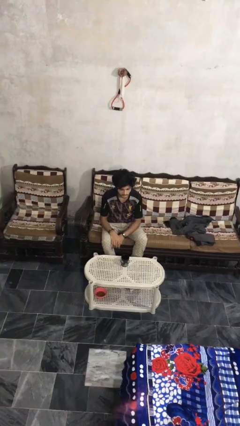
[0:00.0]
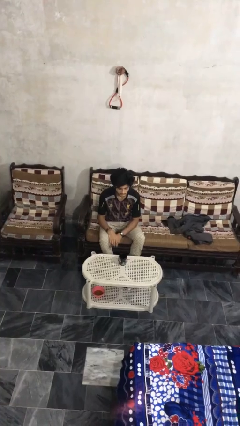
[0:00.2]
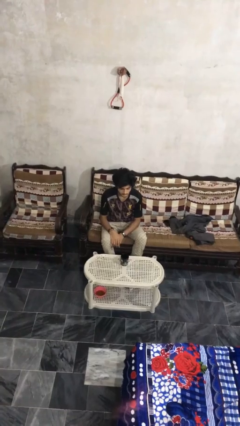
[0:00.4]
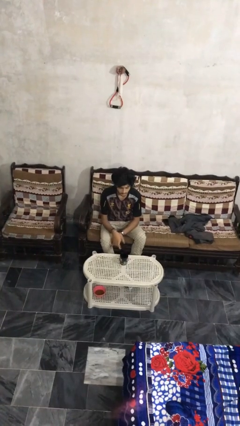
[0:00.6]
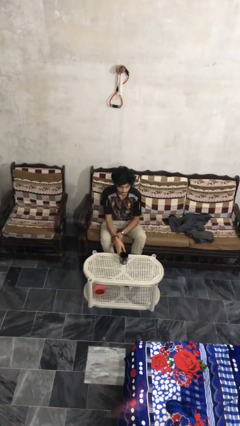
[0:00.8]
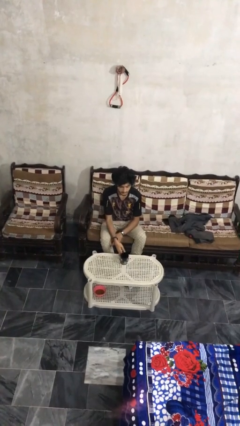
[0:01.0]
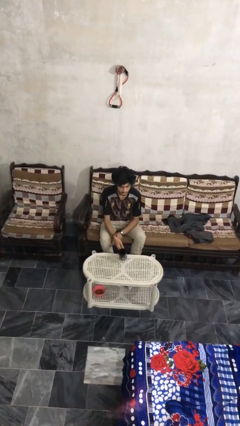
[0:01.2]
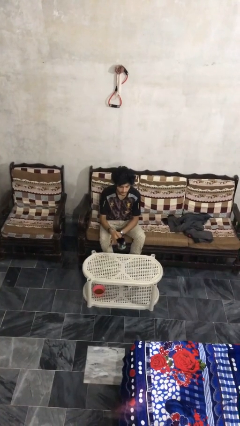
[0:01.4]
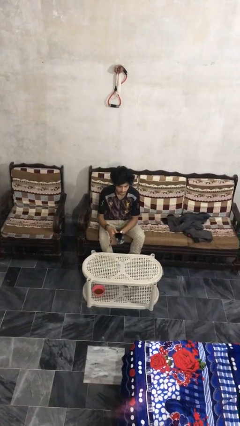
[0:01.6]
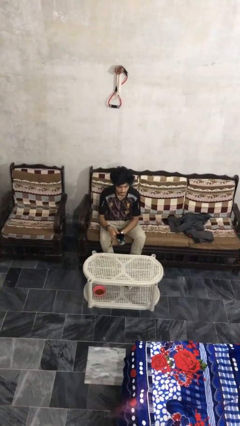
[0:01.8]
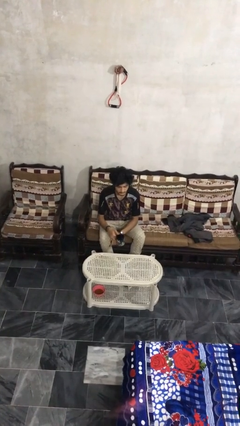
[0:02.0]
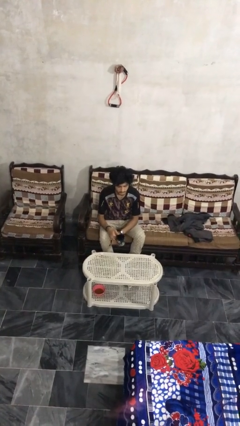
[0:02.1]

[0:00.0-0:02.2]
person picks up object from table

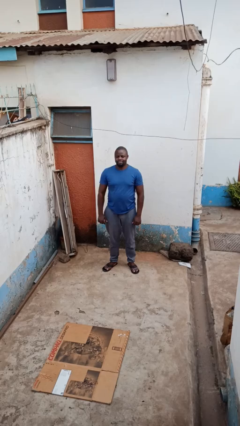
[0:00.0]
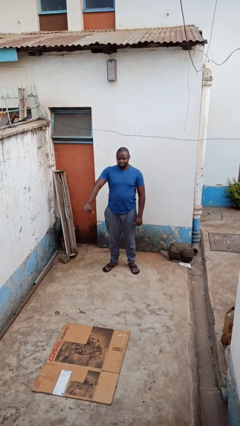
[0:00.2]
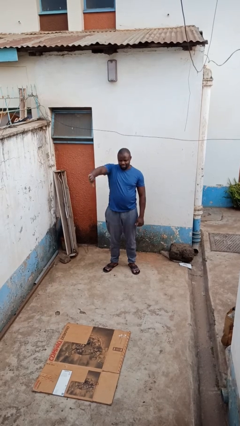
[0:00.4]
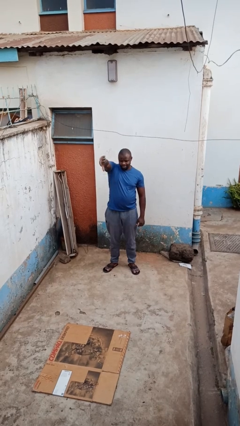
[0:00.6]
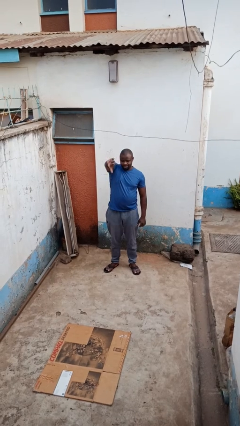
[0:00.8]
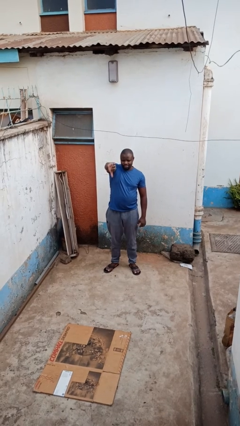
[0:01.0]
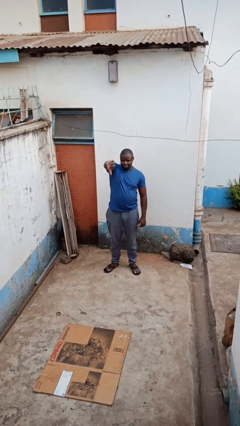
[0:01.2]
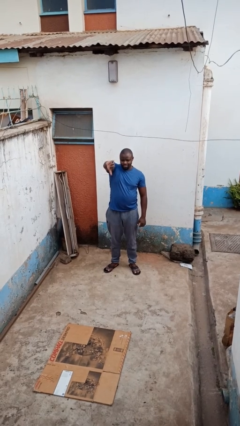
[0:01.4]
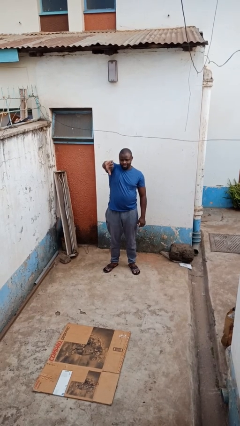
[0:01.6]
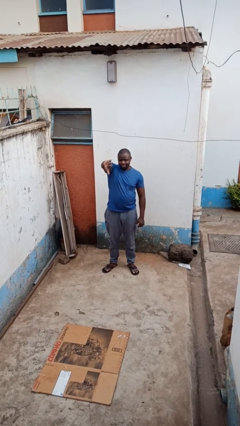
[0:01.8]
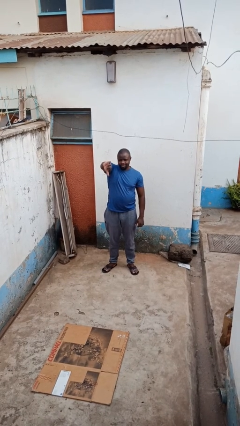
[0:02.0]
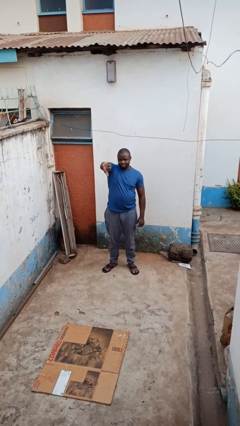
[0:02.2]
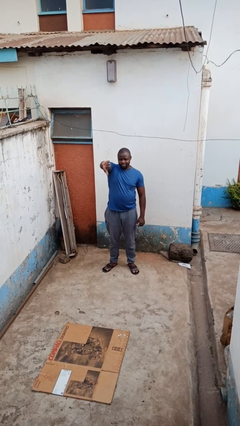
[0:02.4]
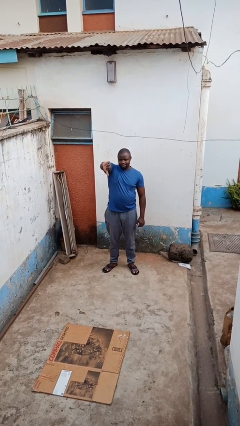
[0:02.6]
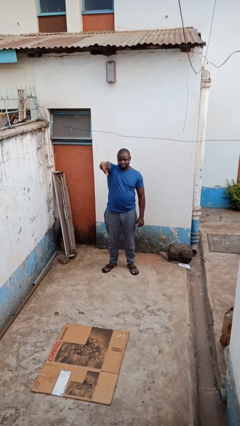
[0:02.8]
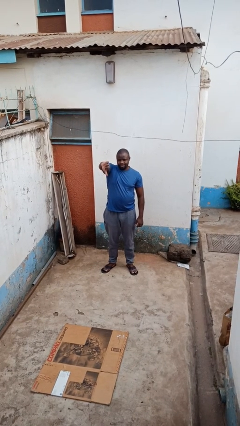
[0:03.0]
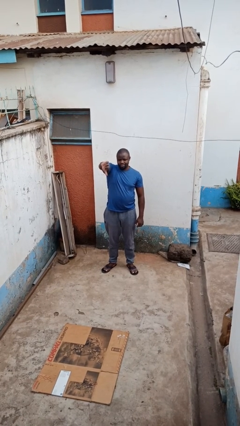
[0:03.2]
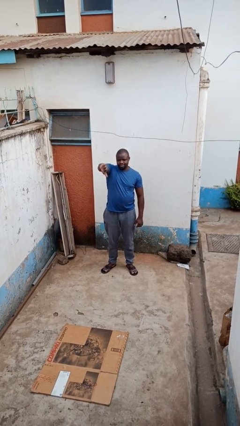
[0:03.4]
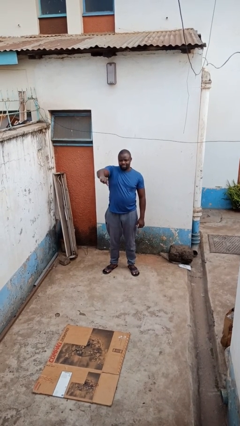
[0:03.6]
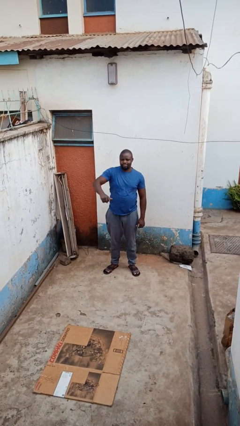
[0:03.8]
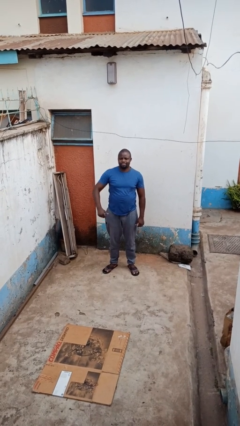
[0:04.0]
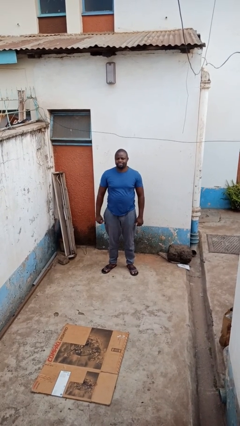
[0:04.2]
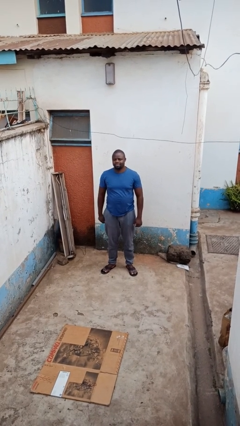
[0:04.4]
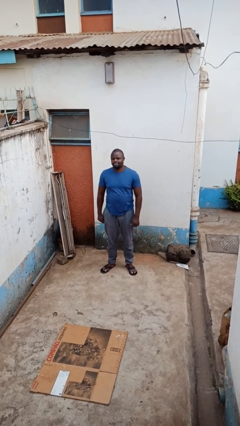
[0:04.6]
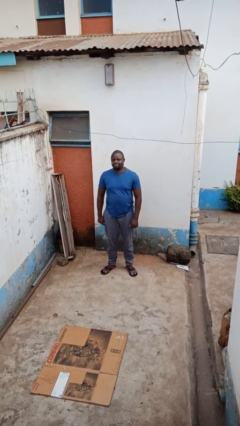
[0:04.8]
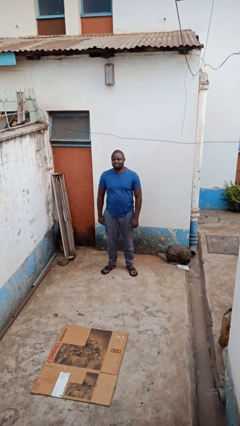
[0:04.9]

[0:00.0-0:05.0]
person gestures thumbs down

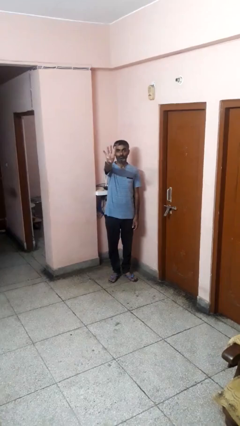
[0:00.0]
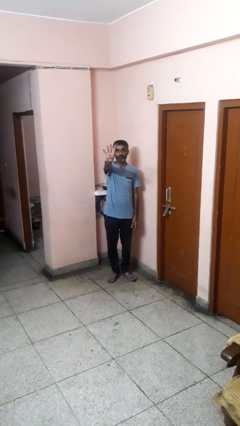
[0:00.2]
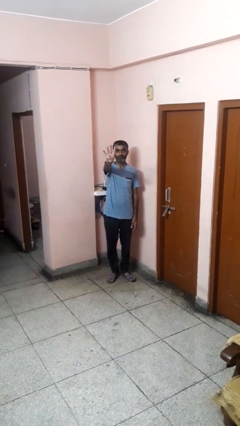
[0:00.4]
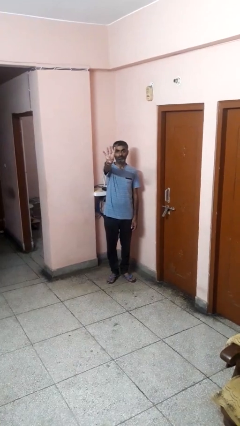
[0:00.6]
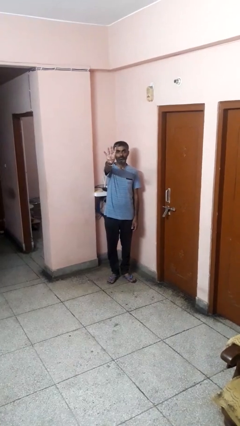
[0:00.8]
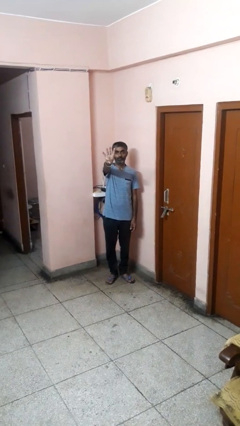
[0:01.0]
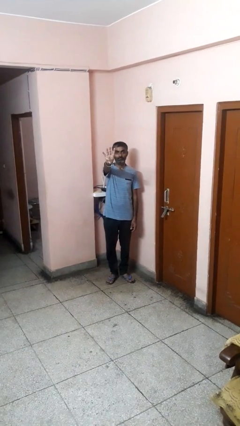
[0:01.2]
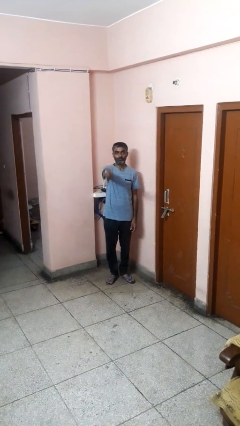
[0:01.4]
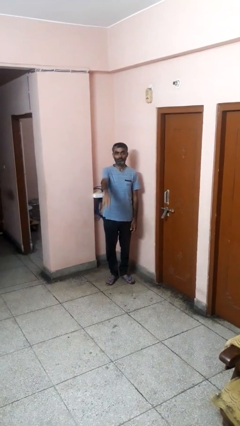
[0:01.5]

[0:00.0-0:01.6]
person gestures number four

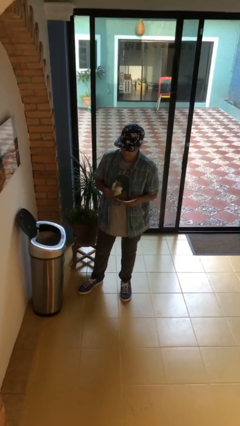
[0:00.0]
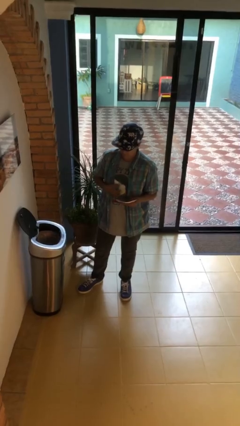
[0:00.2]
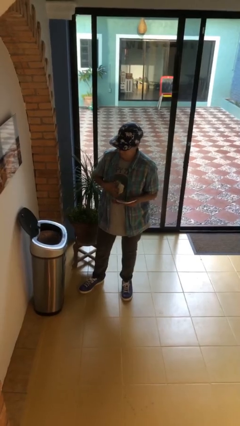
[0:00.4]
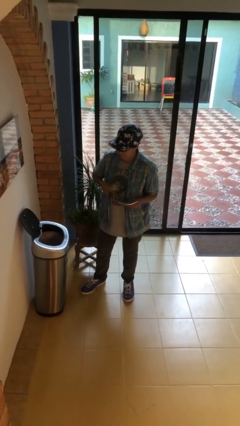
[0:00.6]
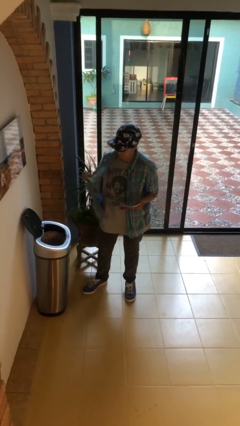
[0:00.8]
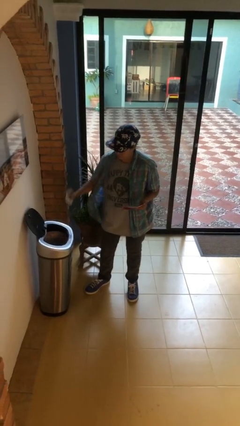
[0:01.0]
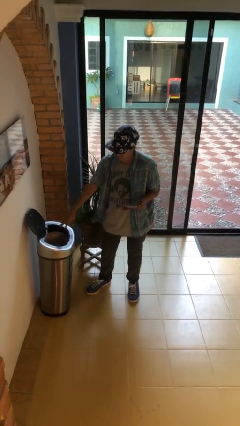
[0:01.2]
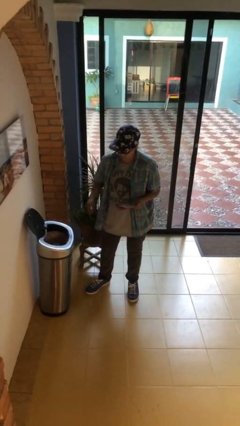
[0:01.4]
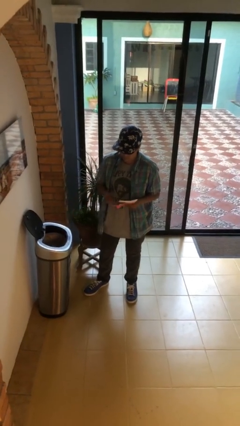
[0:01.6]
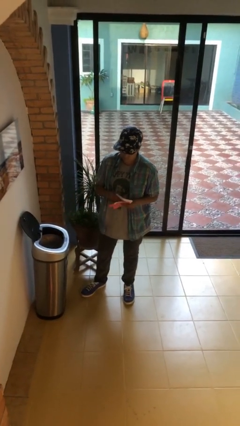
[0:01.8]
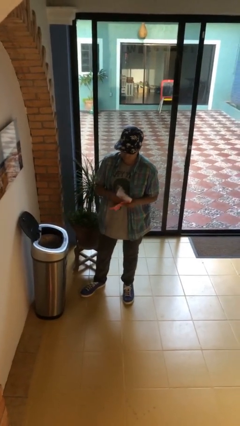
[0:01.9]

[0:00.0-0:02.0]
person discards trash

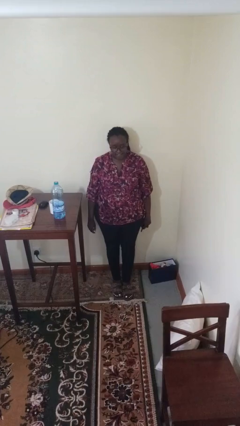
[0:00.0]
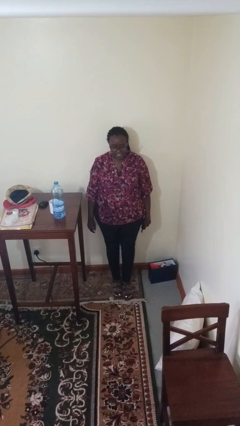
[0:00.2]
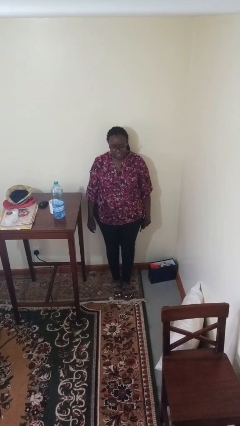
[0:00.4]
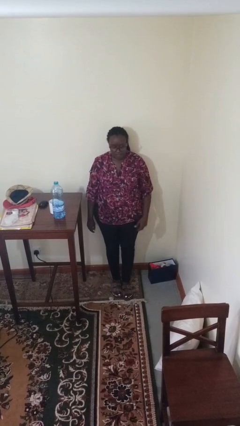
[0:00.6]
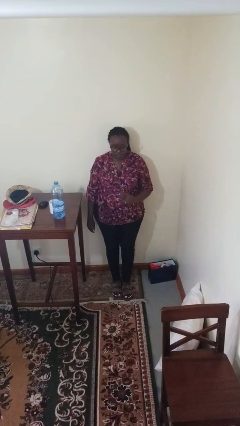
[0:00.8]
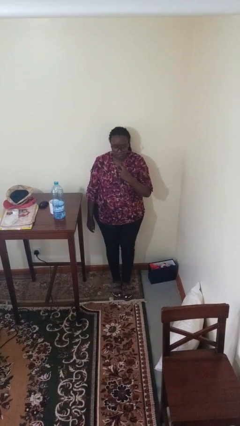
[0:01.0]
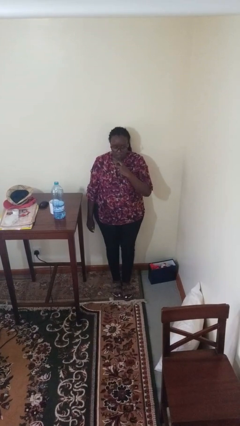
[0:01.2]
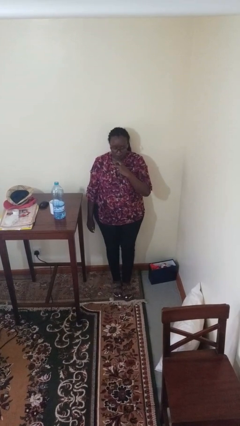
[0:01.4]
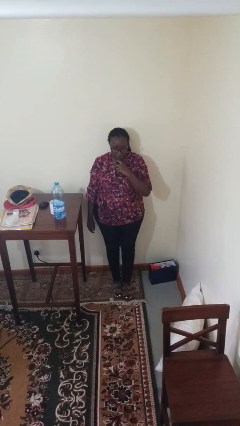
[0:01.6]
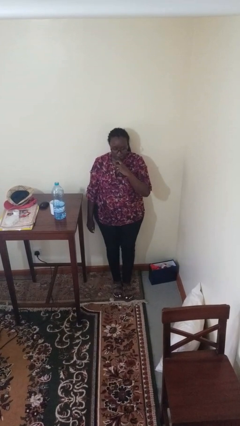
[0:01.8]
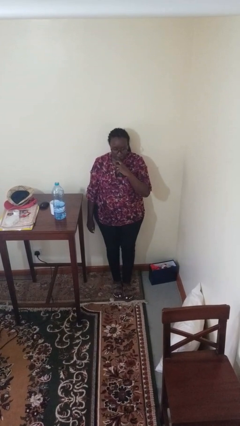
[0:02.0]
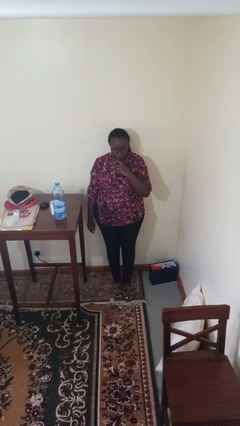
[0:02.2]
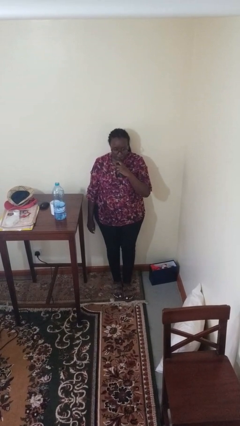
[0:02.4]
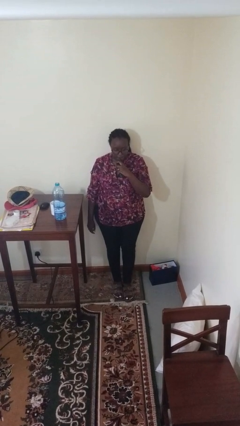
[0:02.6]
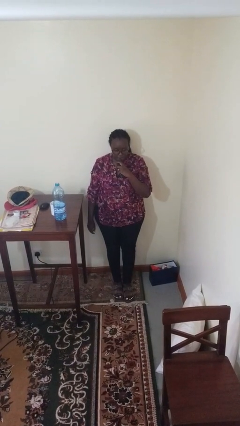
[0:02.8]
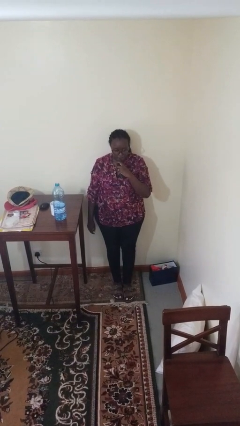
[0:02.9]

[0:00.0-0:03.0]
person vapes

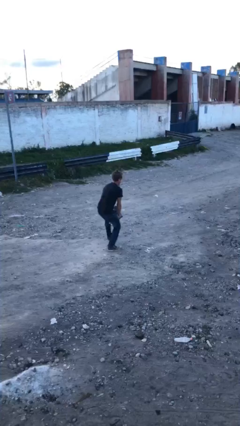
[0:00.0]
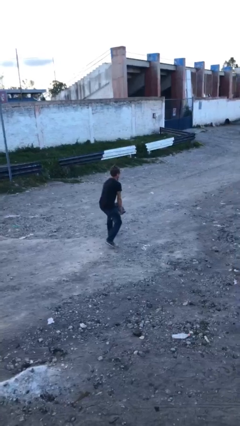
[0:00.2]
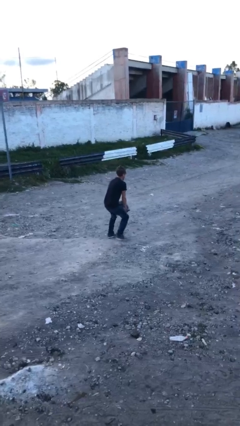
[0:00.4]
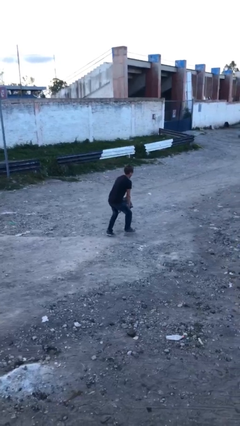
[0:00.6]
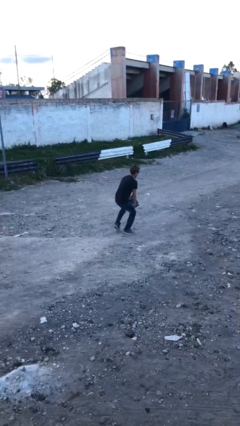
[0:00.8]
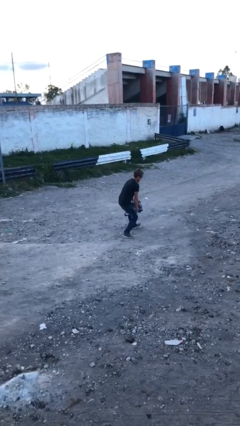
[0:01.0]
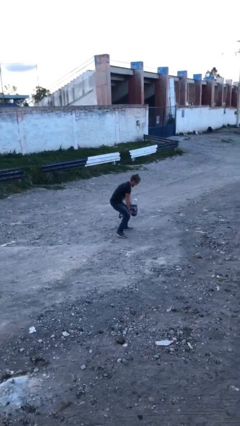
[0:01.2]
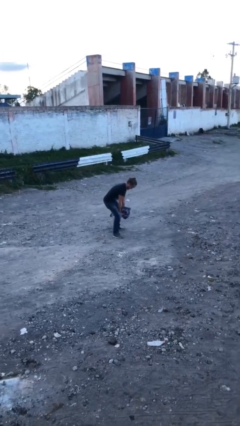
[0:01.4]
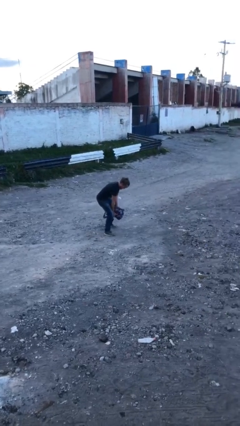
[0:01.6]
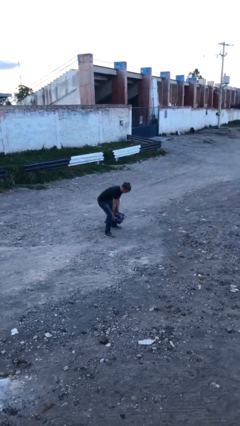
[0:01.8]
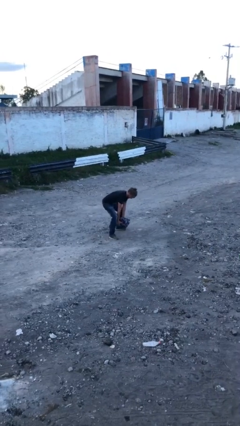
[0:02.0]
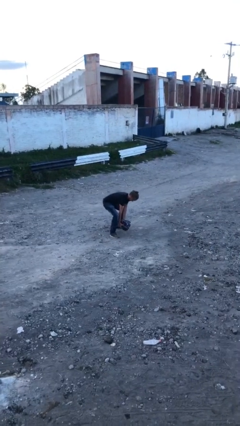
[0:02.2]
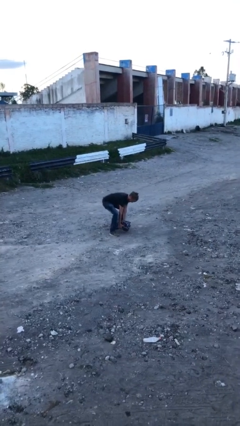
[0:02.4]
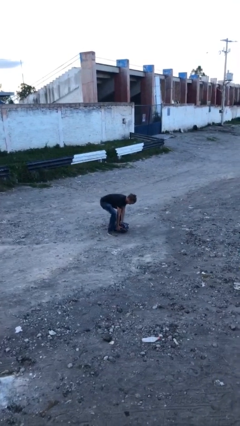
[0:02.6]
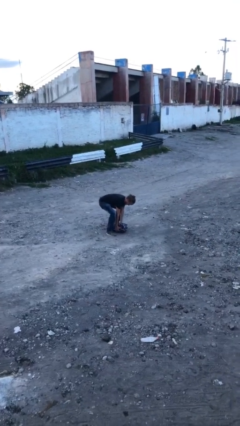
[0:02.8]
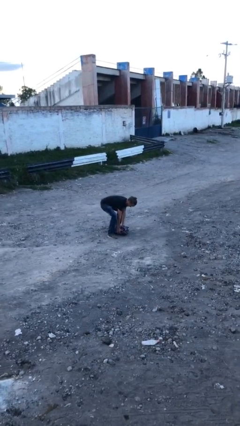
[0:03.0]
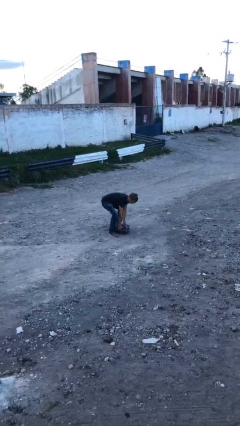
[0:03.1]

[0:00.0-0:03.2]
person puts down object on floor

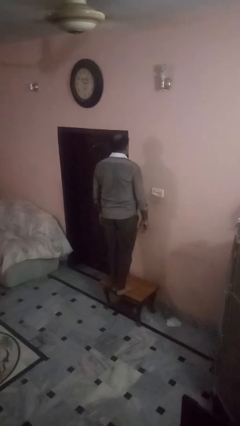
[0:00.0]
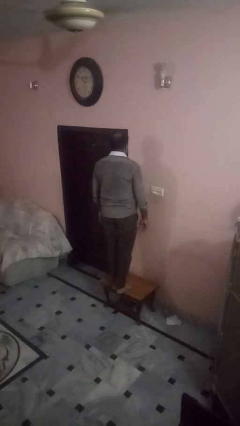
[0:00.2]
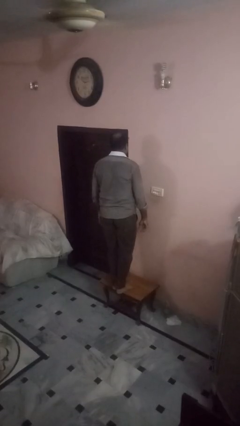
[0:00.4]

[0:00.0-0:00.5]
person climbs off table
